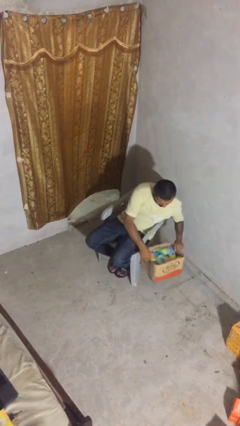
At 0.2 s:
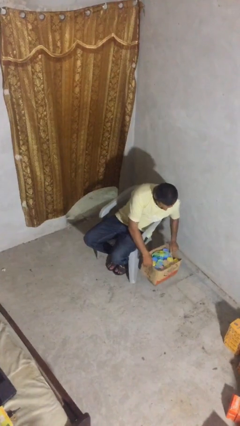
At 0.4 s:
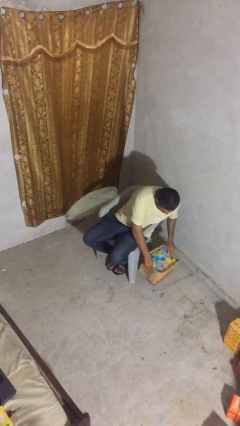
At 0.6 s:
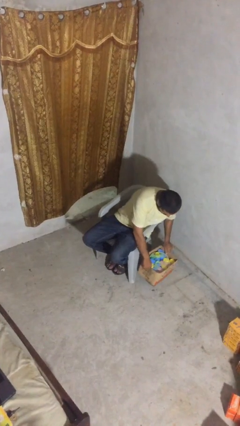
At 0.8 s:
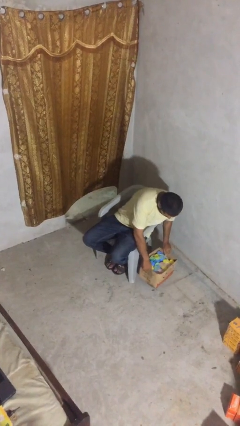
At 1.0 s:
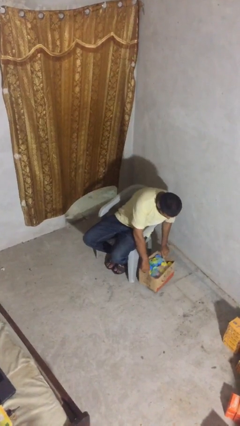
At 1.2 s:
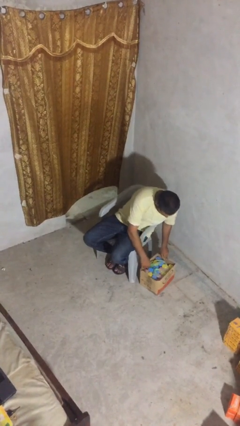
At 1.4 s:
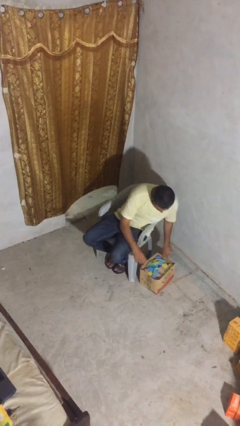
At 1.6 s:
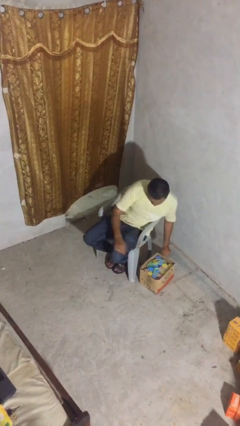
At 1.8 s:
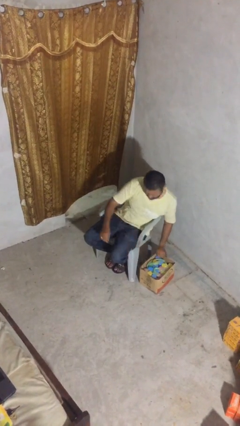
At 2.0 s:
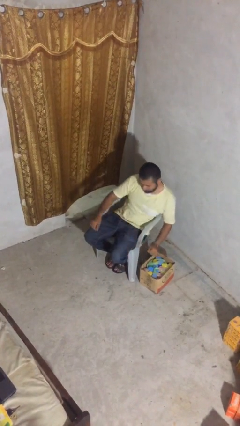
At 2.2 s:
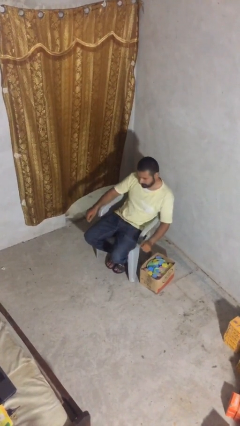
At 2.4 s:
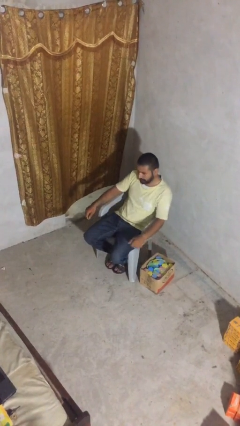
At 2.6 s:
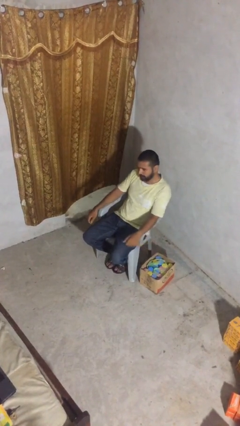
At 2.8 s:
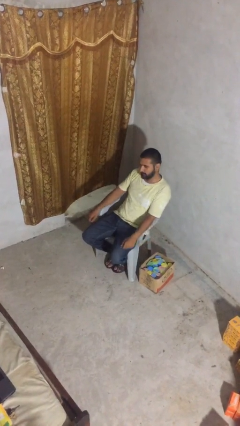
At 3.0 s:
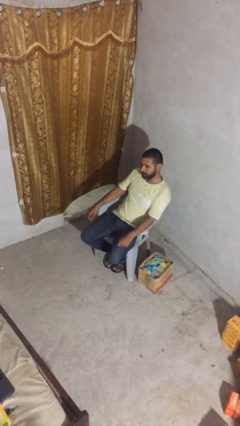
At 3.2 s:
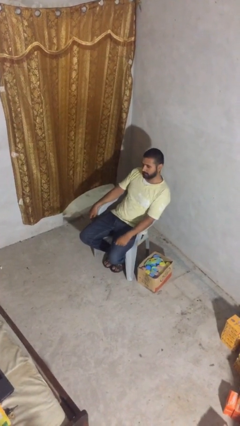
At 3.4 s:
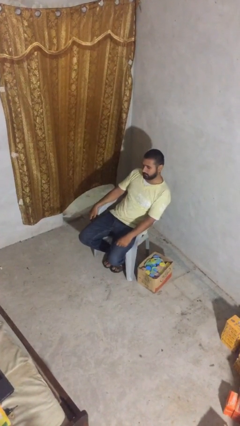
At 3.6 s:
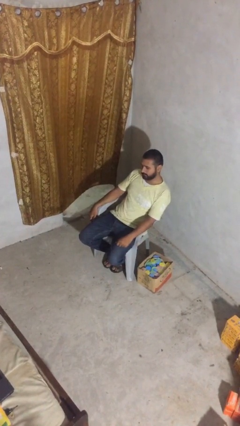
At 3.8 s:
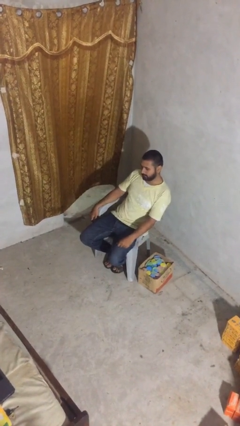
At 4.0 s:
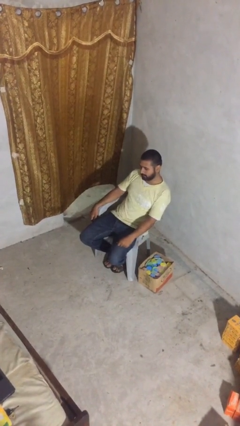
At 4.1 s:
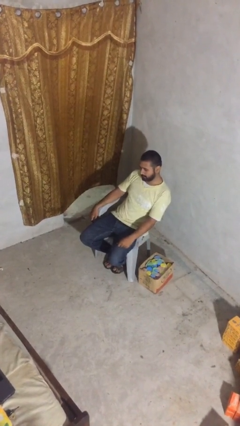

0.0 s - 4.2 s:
person puts down object on floor

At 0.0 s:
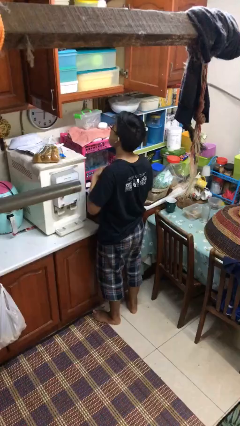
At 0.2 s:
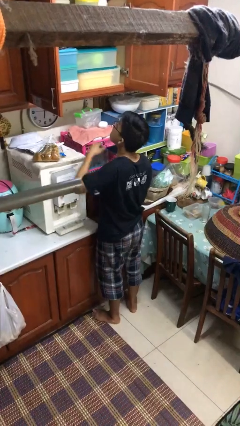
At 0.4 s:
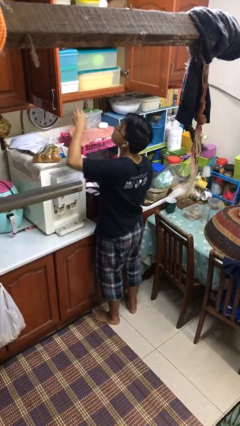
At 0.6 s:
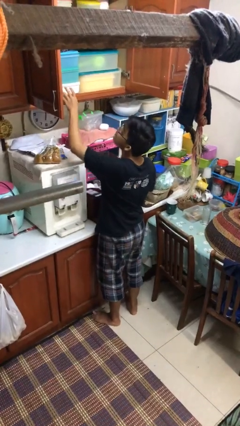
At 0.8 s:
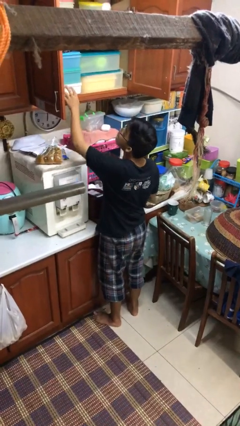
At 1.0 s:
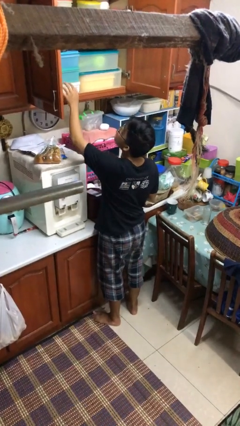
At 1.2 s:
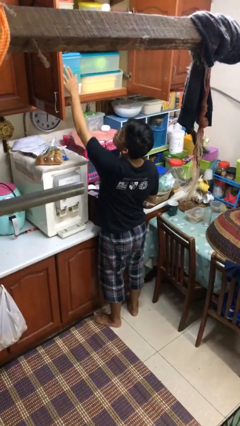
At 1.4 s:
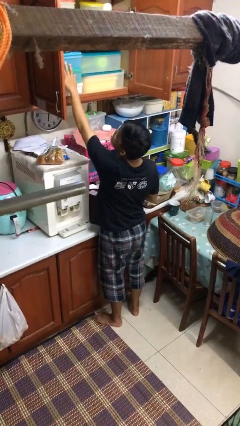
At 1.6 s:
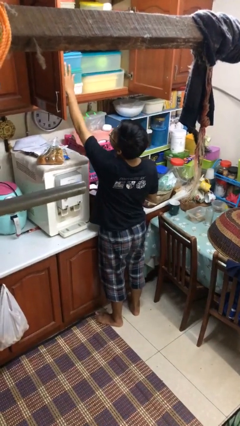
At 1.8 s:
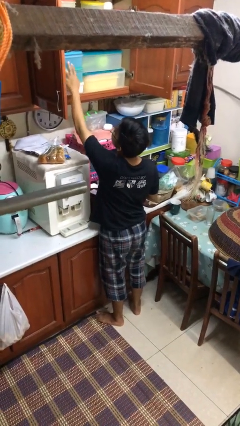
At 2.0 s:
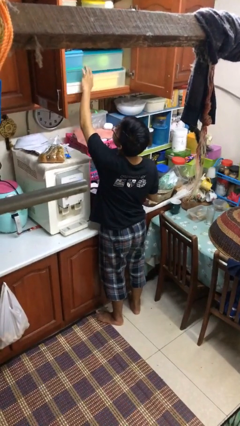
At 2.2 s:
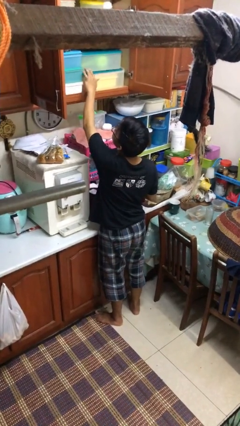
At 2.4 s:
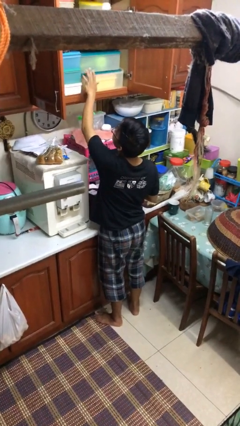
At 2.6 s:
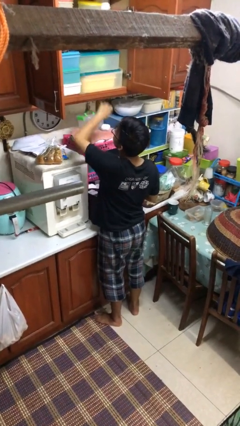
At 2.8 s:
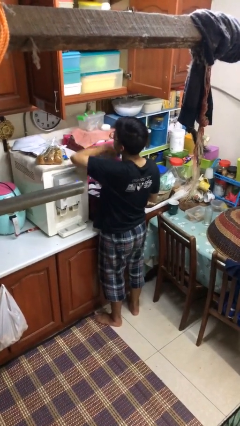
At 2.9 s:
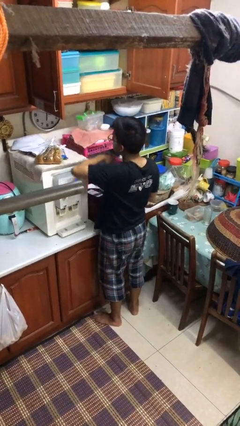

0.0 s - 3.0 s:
person searches in kitchen drawer

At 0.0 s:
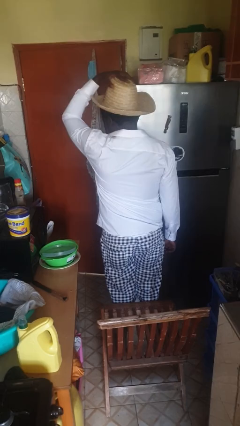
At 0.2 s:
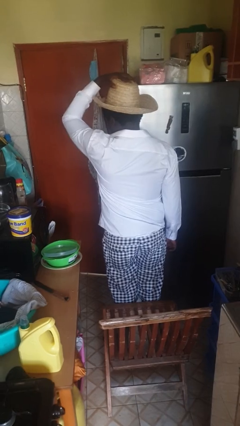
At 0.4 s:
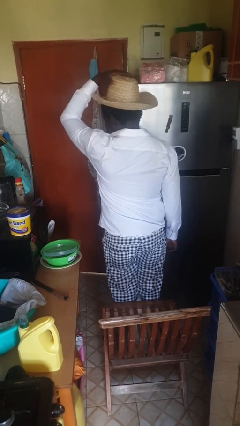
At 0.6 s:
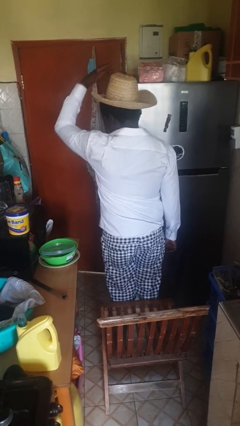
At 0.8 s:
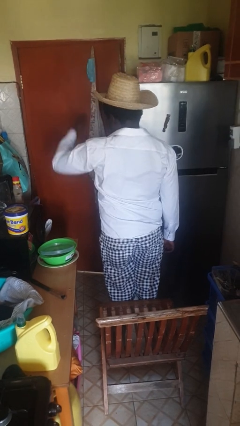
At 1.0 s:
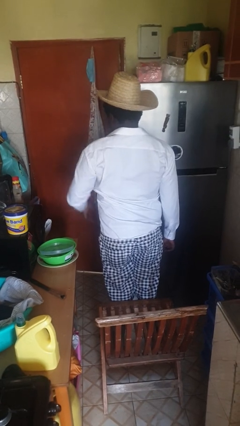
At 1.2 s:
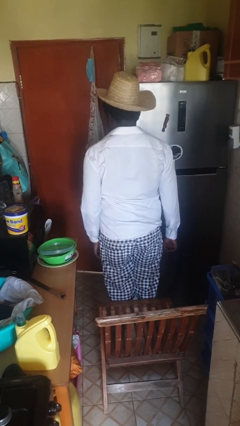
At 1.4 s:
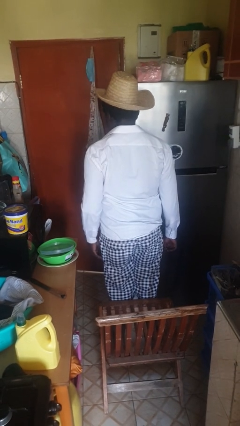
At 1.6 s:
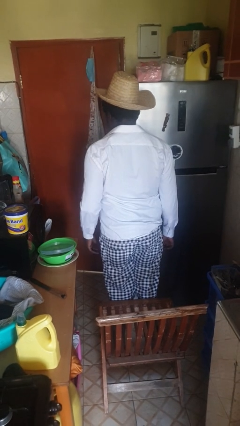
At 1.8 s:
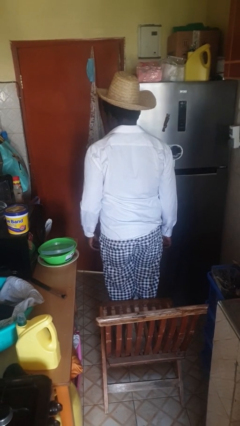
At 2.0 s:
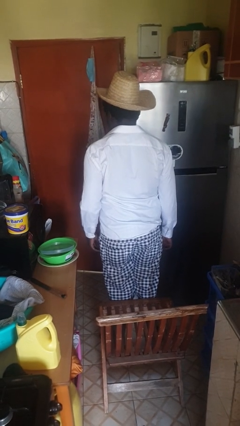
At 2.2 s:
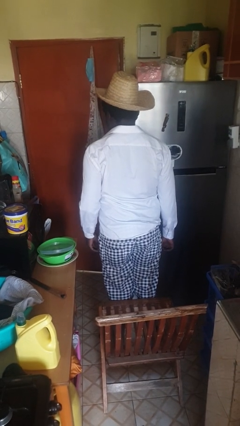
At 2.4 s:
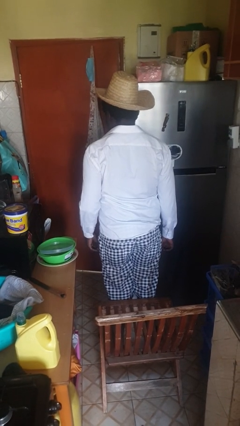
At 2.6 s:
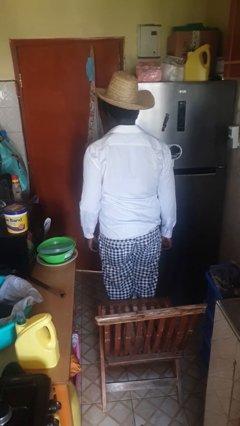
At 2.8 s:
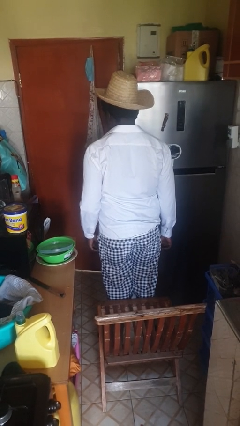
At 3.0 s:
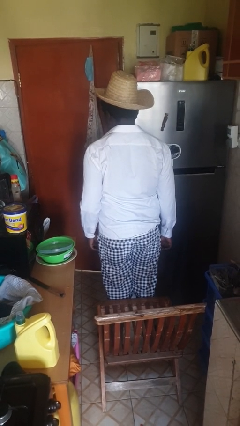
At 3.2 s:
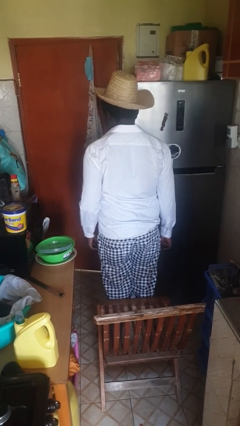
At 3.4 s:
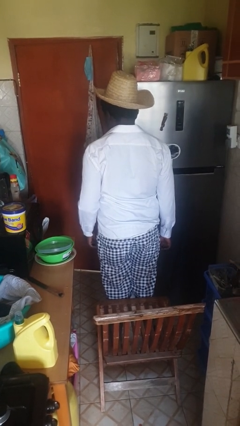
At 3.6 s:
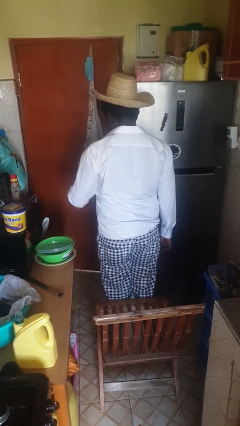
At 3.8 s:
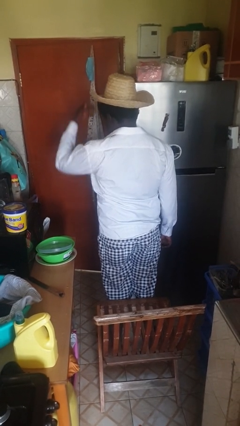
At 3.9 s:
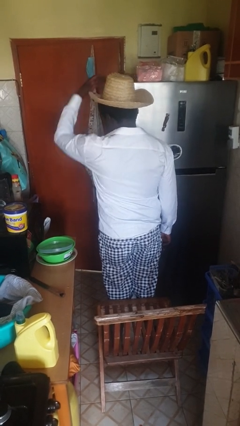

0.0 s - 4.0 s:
person puts on hat

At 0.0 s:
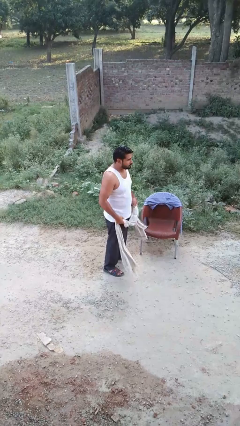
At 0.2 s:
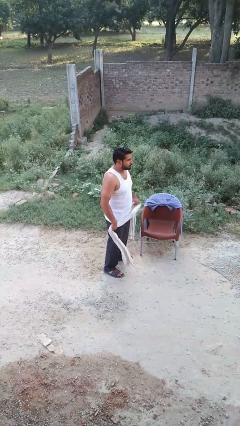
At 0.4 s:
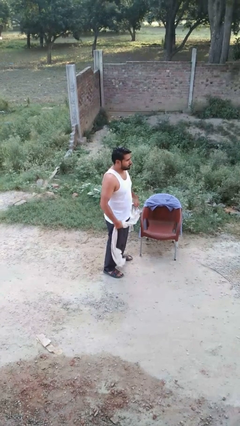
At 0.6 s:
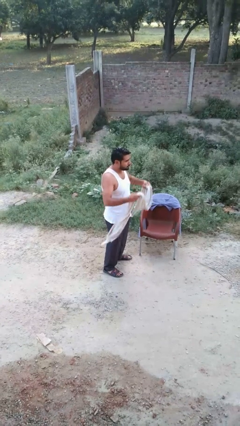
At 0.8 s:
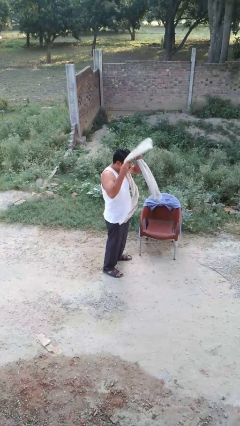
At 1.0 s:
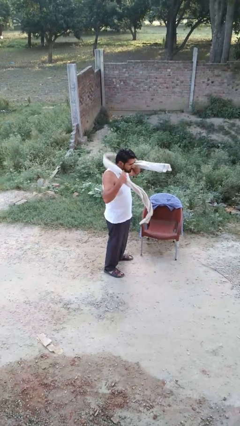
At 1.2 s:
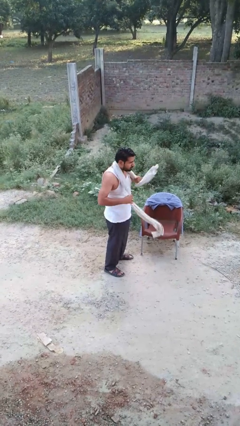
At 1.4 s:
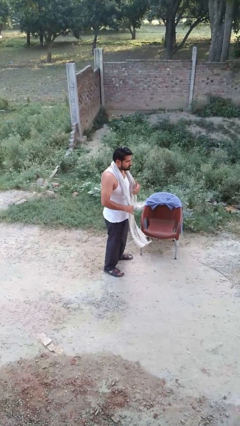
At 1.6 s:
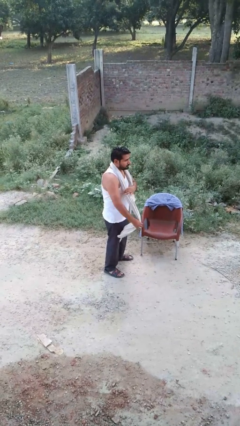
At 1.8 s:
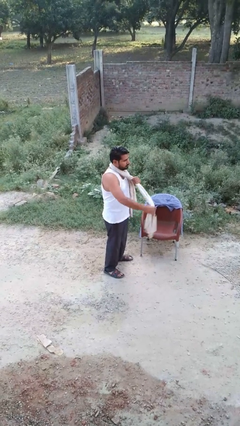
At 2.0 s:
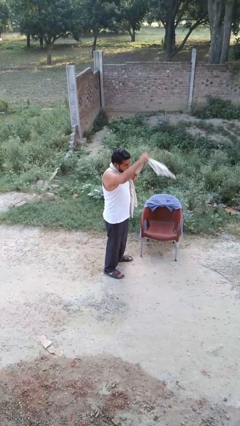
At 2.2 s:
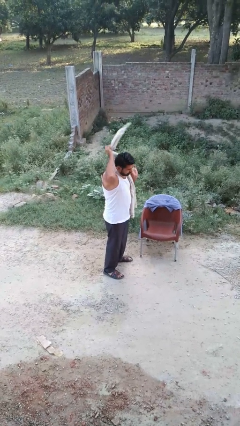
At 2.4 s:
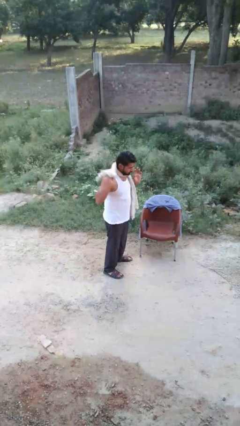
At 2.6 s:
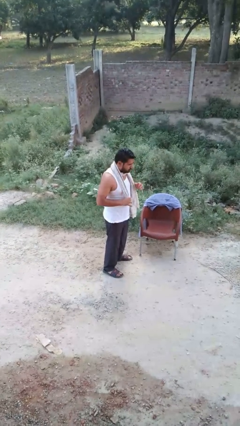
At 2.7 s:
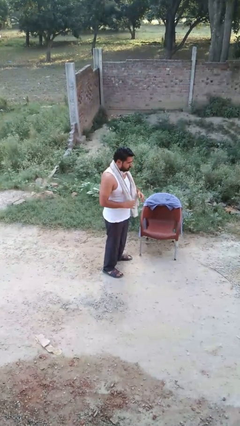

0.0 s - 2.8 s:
person puts on scarf

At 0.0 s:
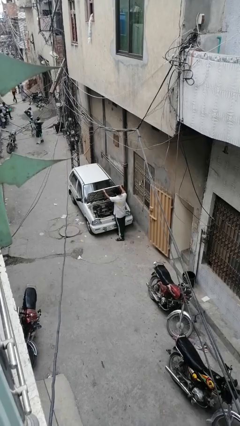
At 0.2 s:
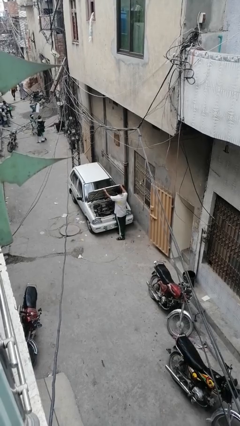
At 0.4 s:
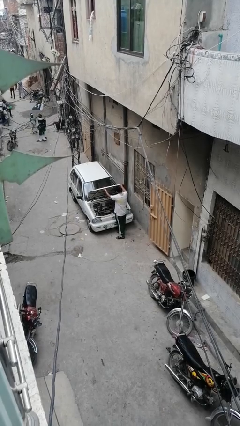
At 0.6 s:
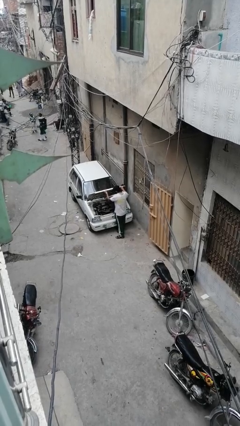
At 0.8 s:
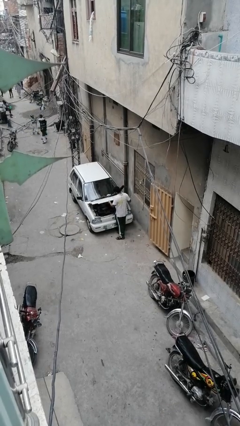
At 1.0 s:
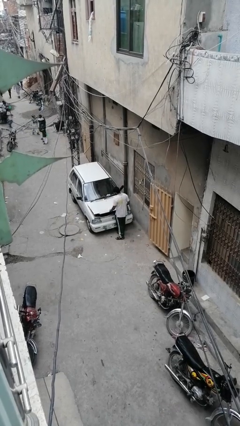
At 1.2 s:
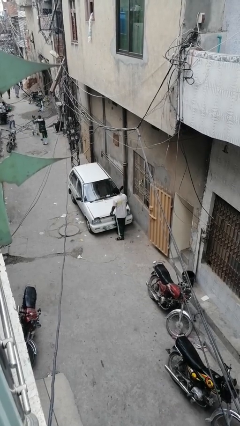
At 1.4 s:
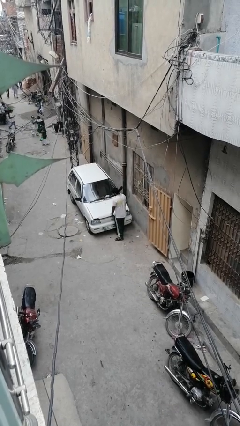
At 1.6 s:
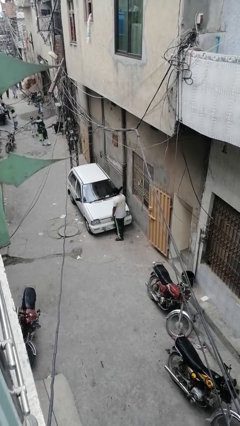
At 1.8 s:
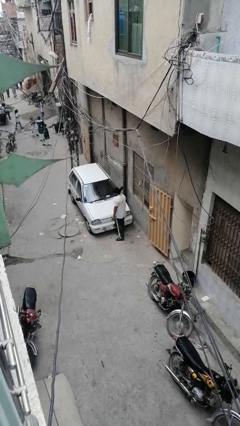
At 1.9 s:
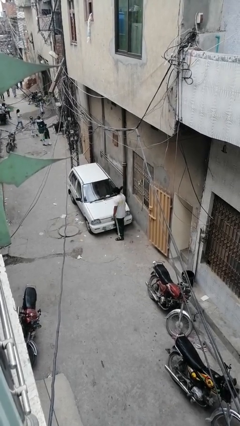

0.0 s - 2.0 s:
person closes car hood

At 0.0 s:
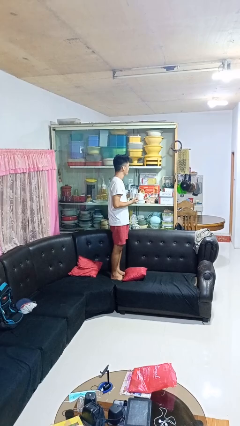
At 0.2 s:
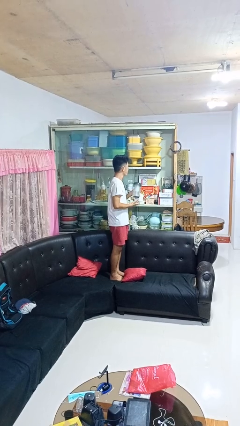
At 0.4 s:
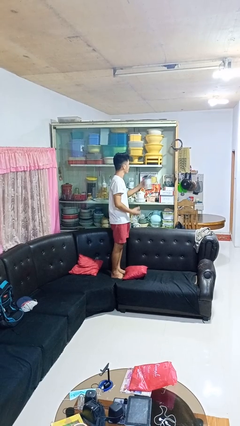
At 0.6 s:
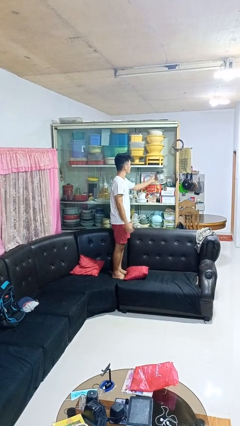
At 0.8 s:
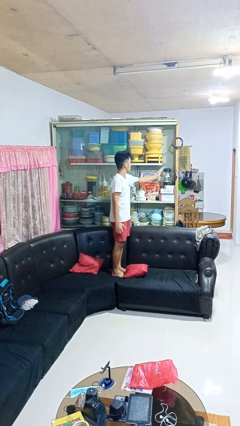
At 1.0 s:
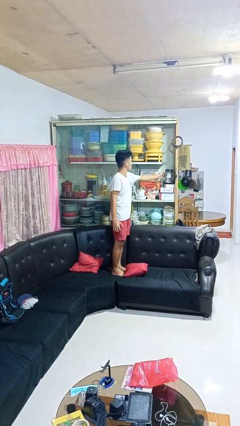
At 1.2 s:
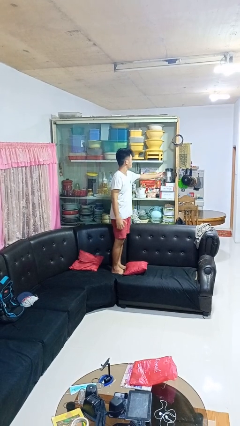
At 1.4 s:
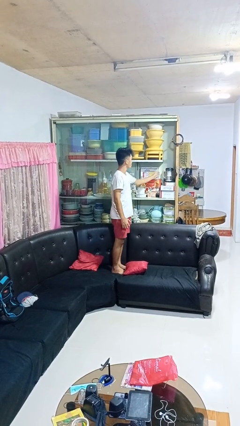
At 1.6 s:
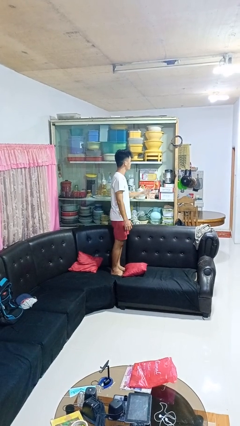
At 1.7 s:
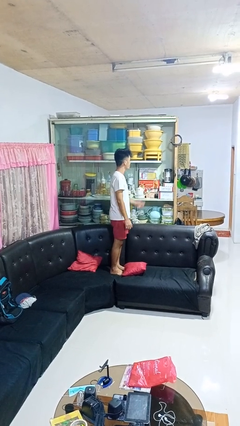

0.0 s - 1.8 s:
person puts down object into cabinet
